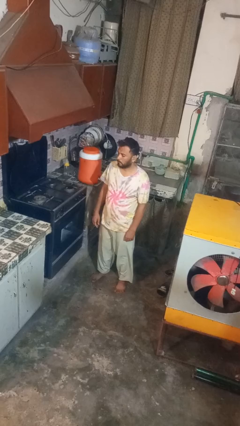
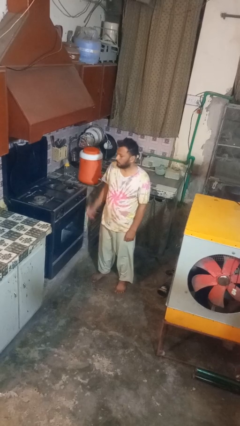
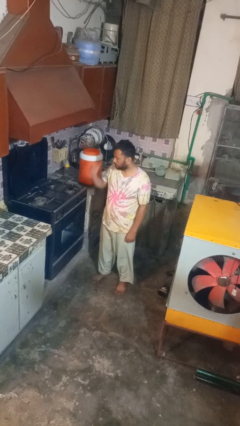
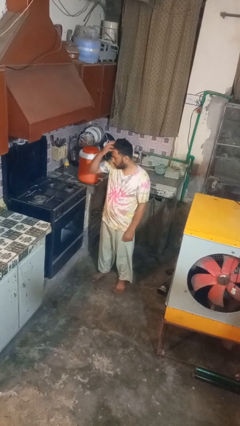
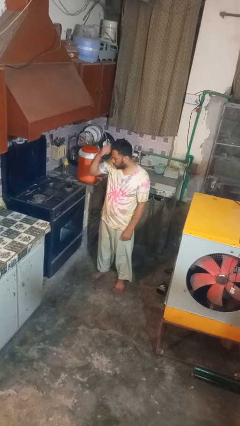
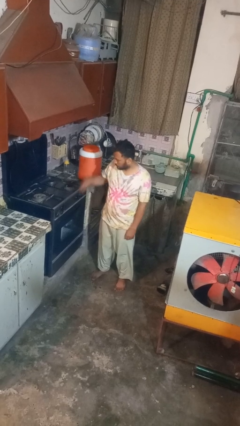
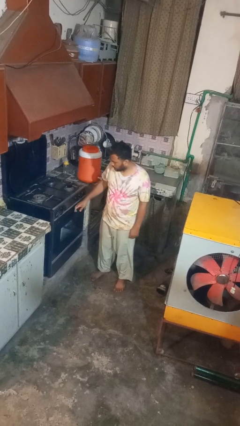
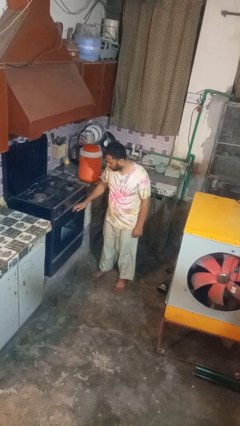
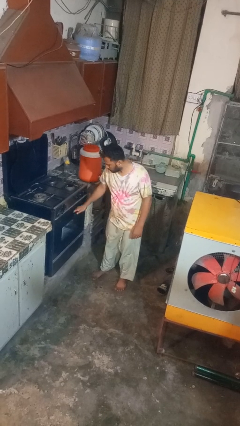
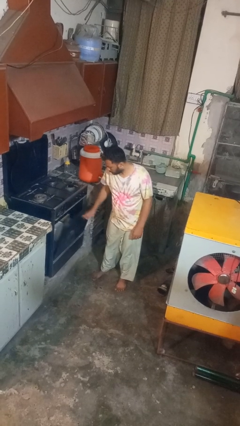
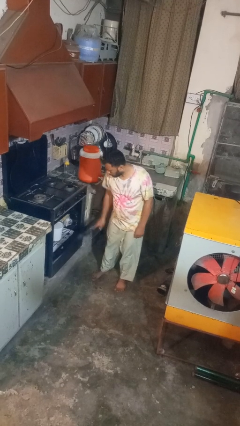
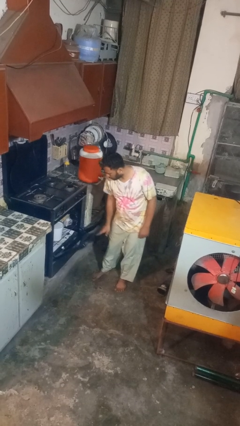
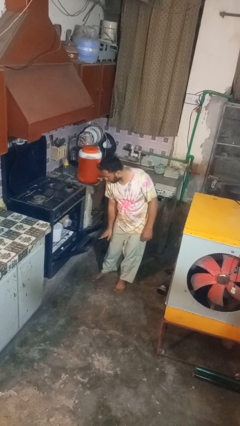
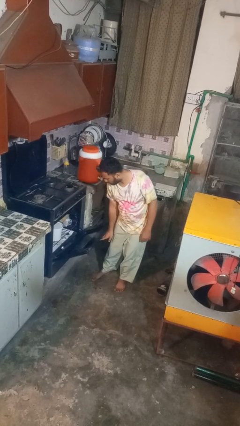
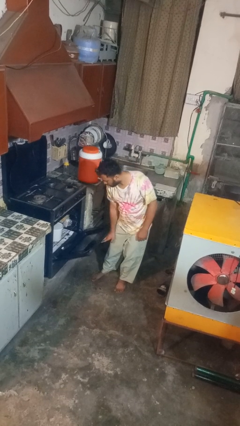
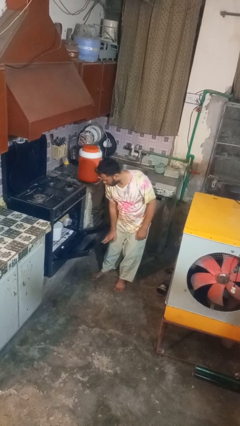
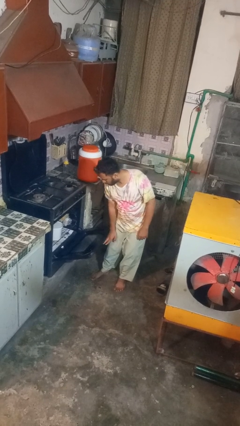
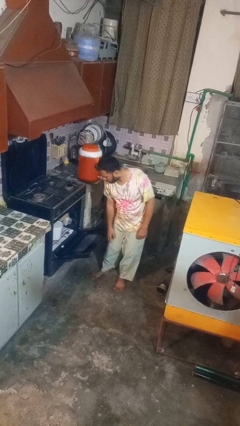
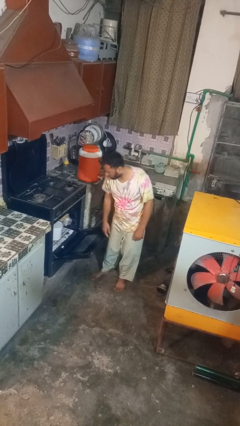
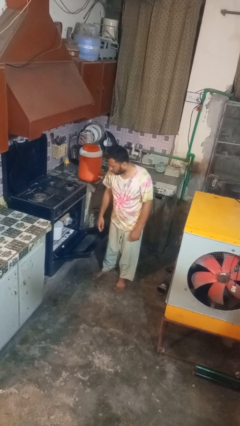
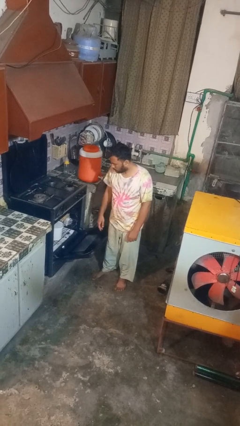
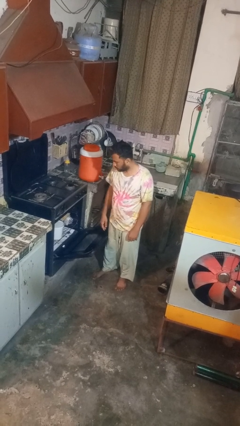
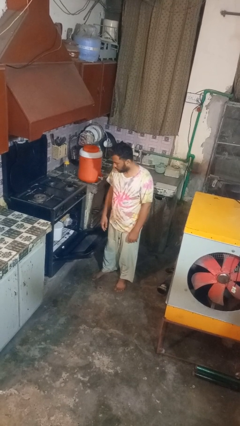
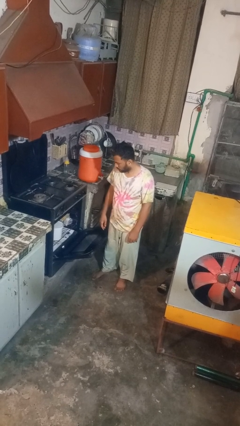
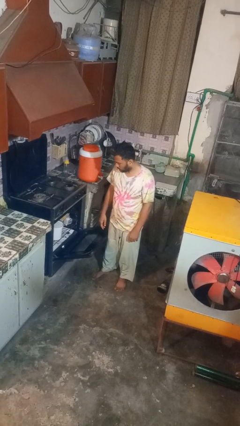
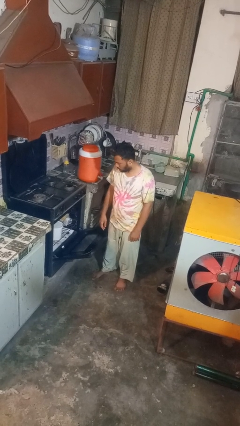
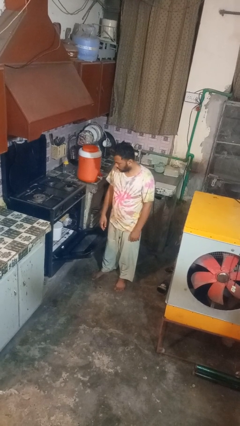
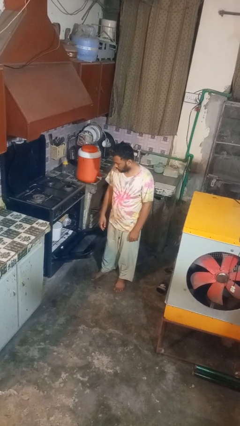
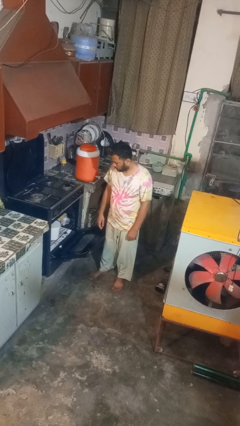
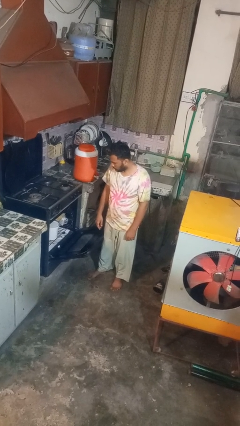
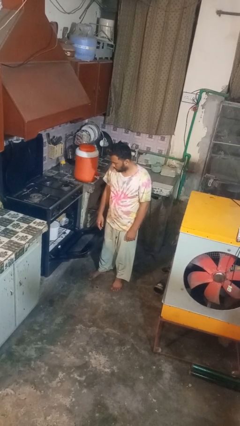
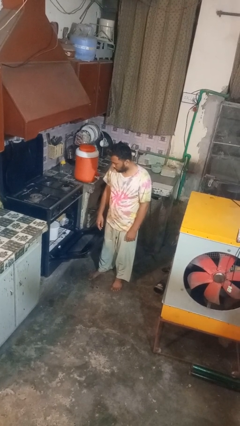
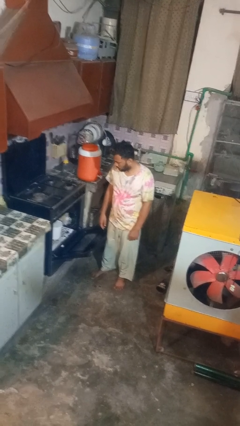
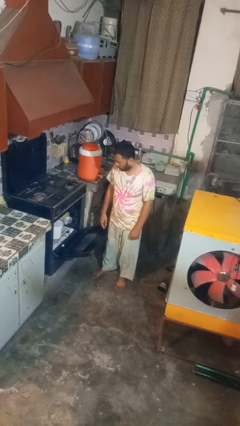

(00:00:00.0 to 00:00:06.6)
person opens oven door

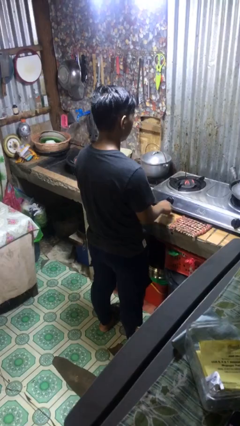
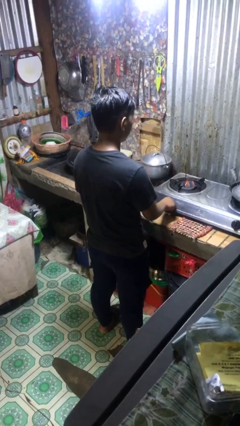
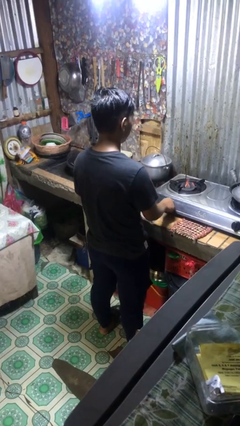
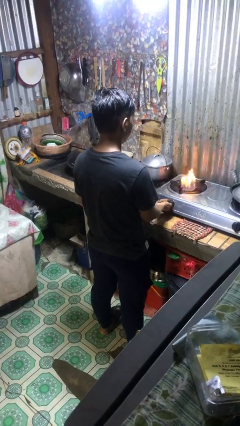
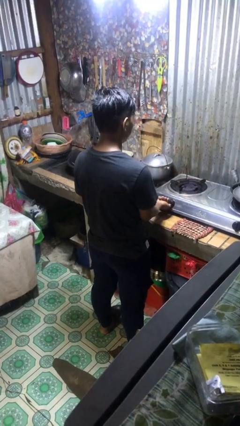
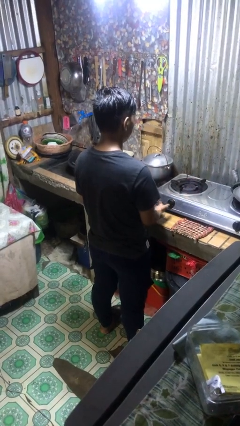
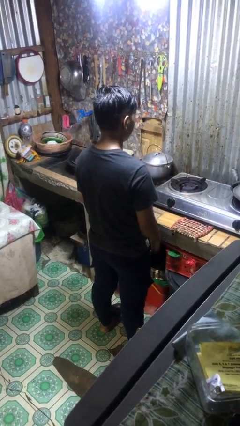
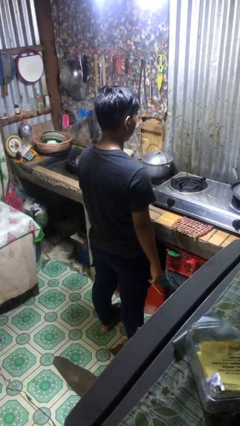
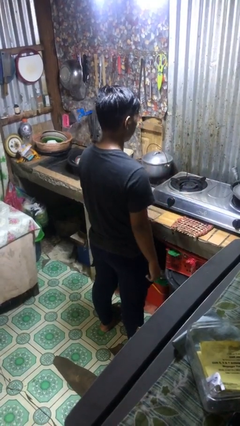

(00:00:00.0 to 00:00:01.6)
person turns off stovetop

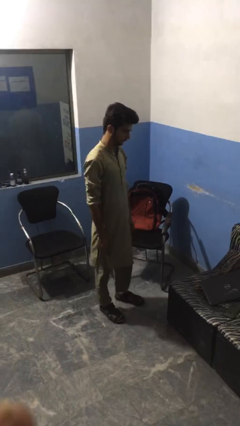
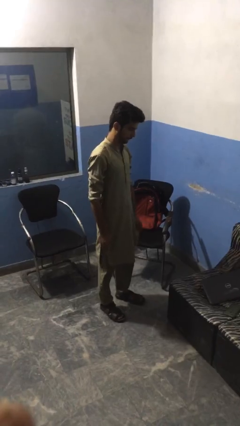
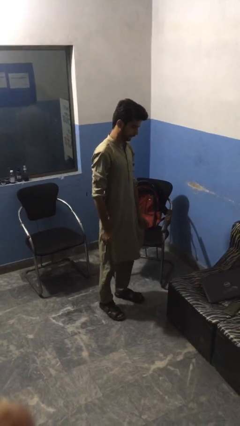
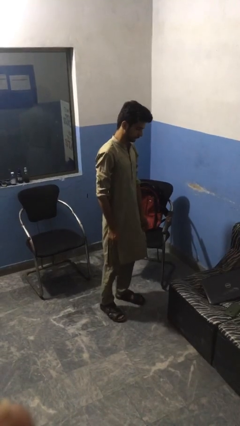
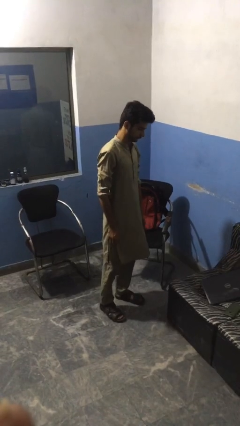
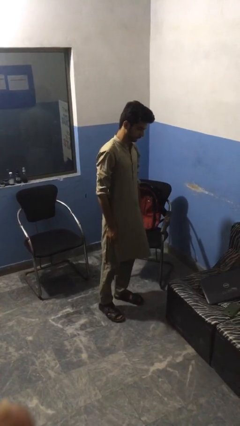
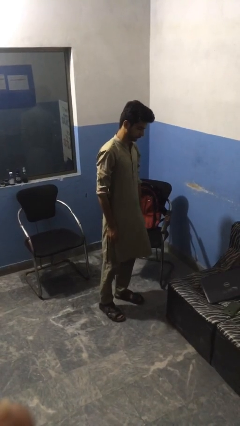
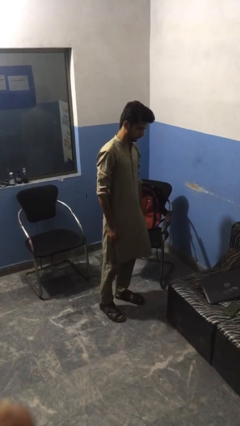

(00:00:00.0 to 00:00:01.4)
person stands up

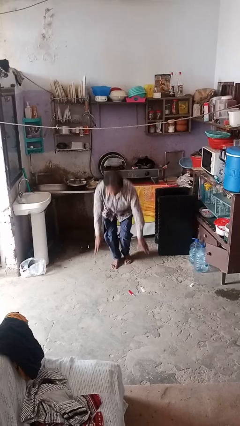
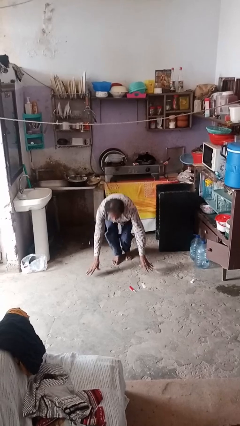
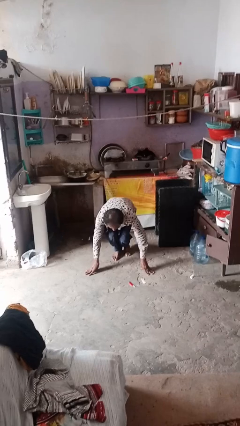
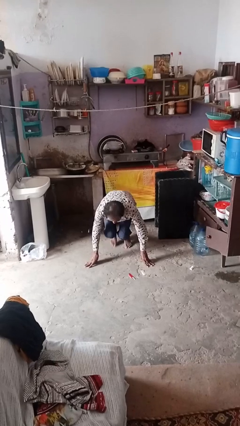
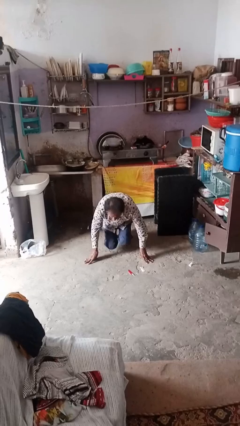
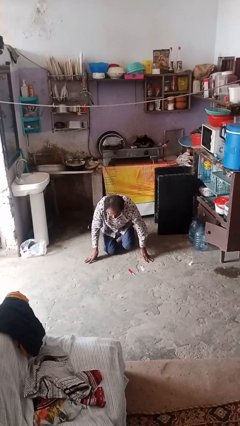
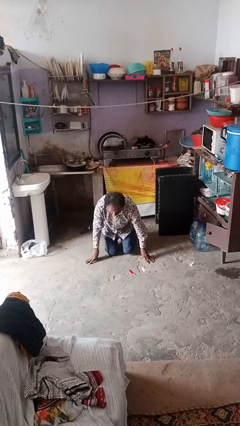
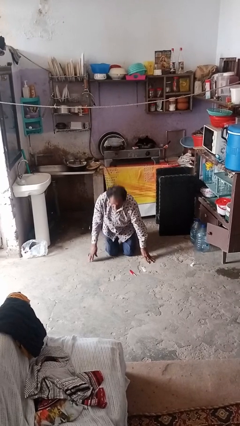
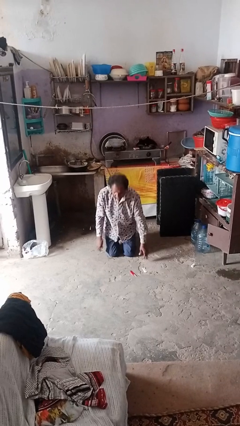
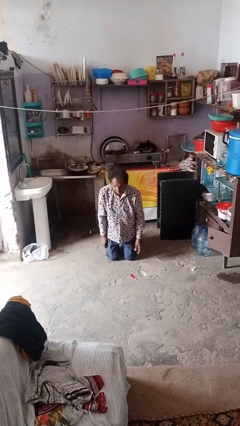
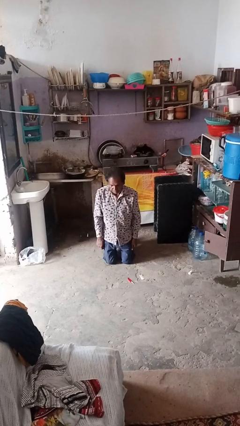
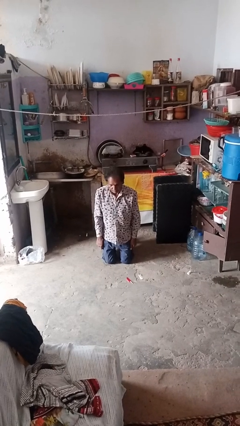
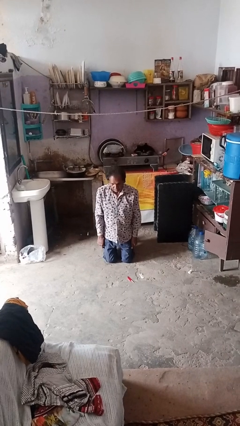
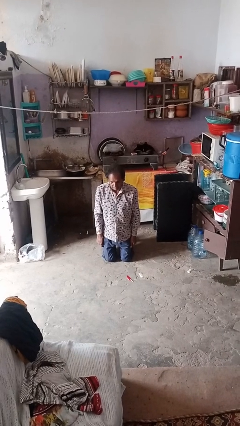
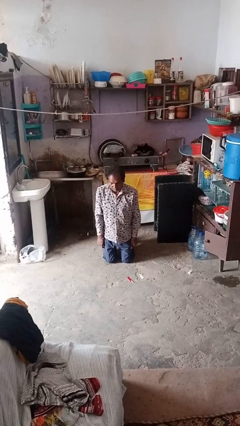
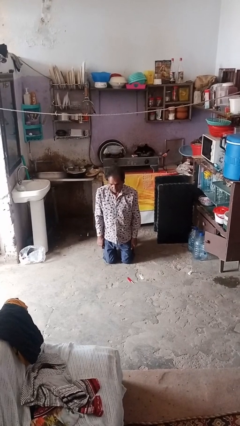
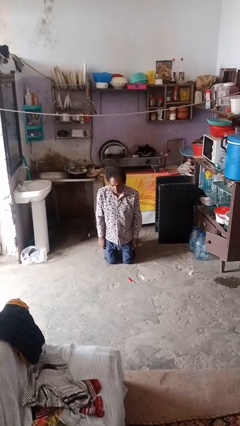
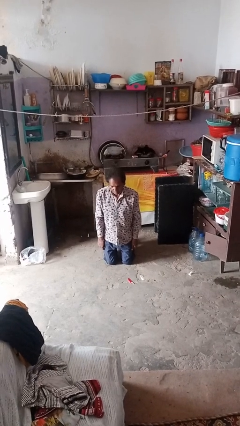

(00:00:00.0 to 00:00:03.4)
person kneels

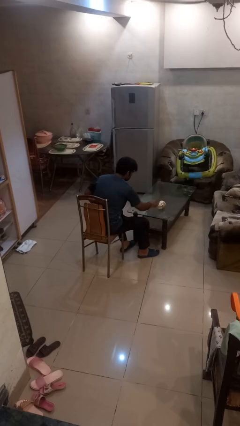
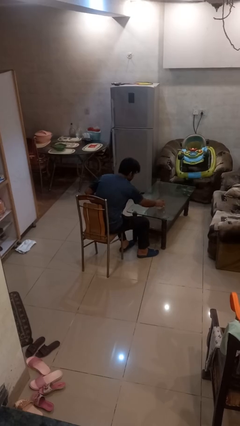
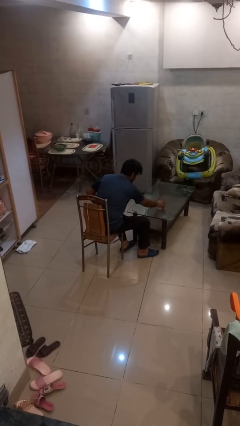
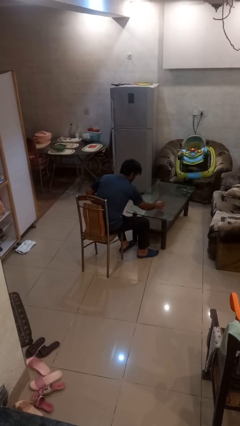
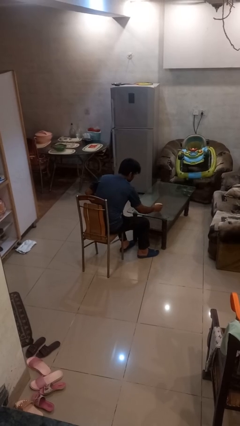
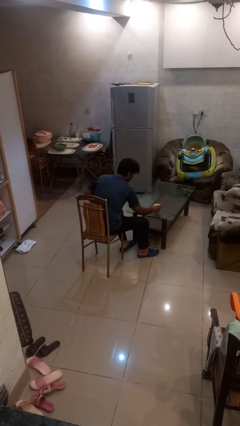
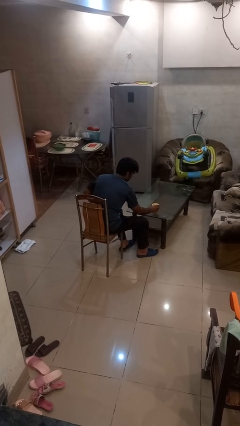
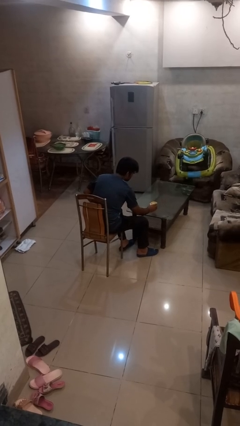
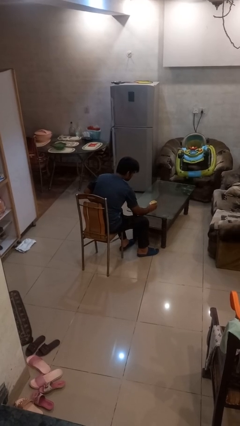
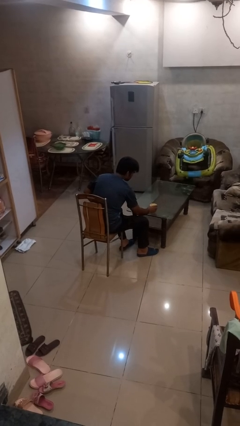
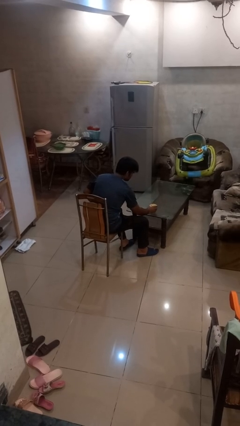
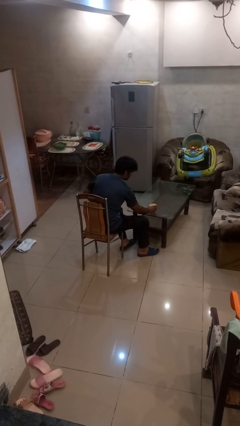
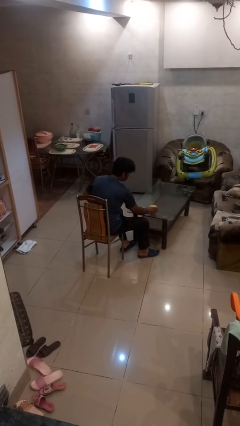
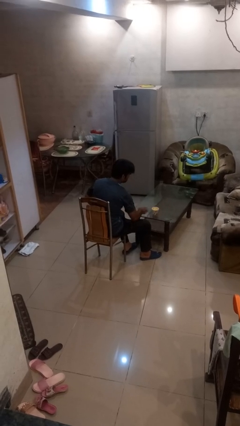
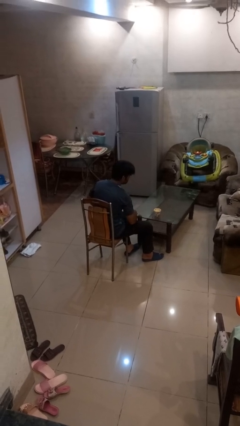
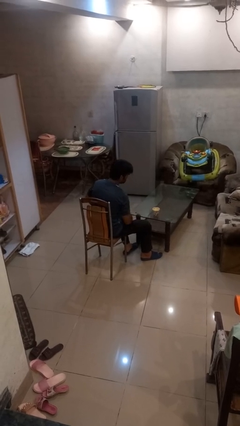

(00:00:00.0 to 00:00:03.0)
person sets upright glass

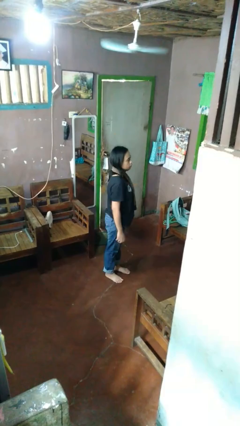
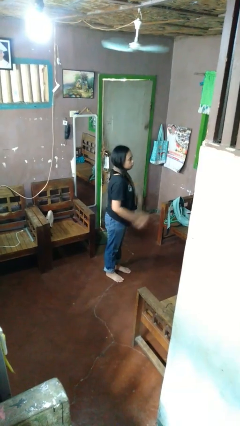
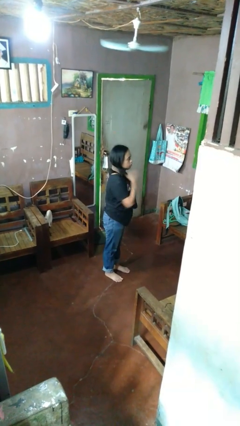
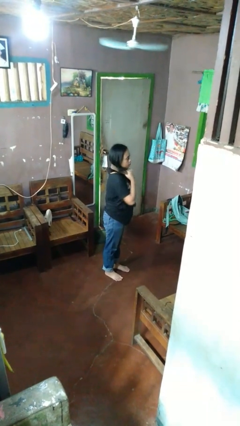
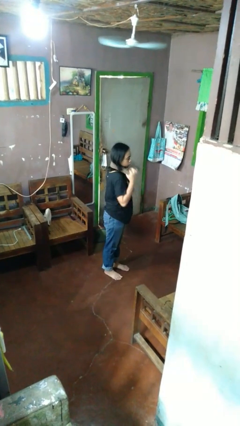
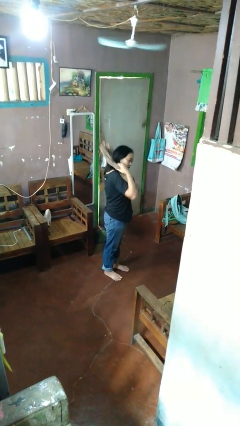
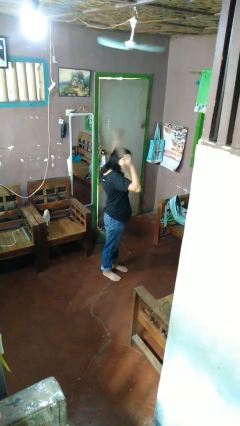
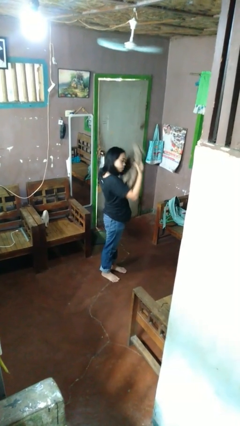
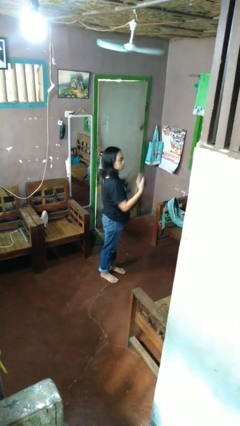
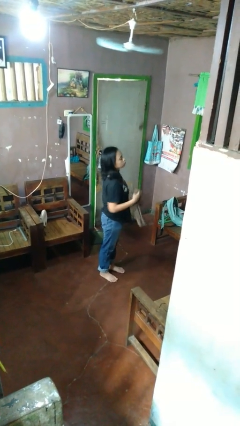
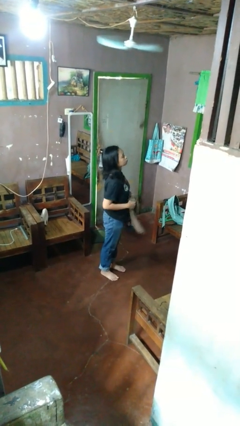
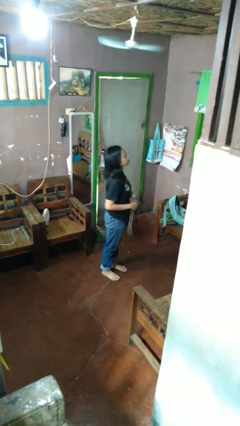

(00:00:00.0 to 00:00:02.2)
person takes off scarf
